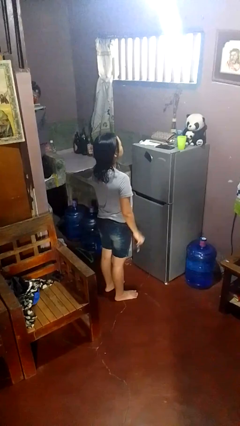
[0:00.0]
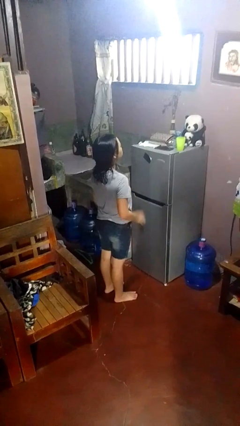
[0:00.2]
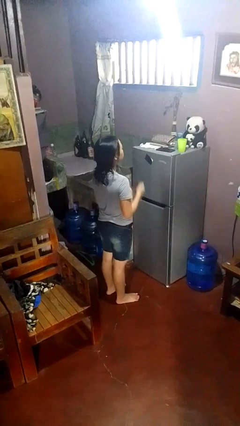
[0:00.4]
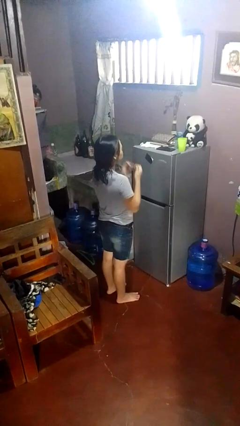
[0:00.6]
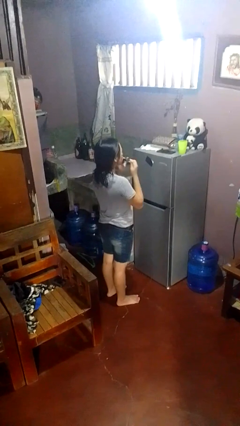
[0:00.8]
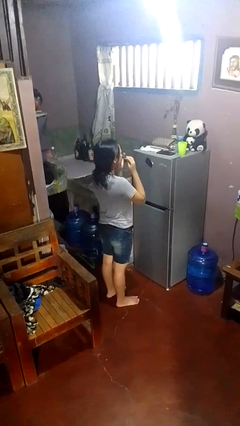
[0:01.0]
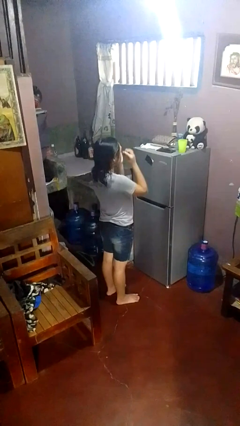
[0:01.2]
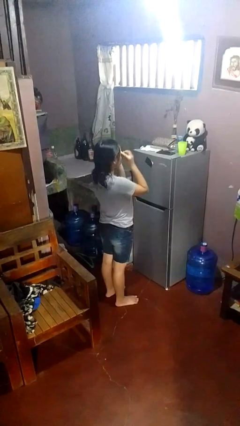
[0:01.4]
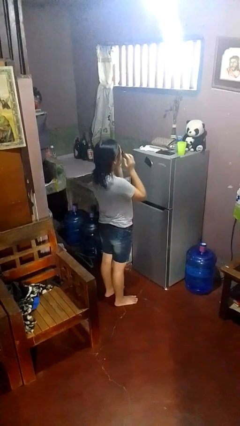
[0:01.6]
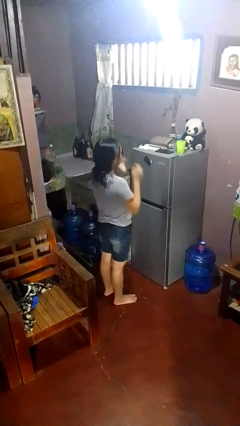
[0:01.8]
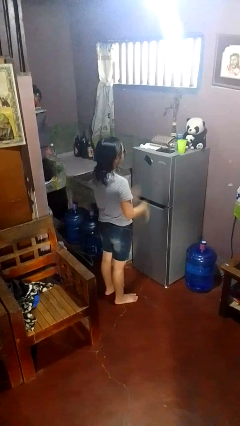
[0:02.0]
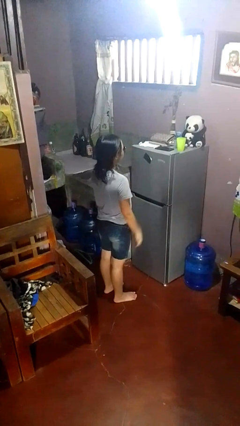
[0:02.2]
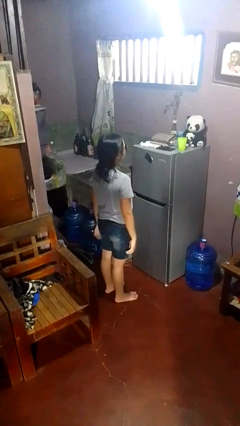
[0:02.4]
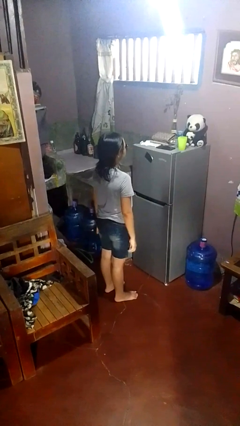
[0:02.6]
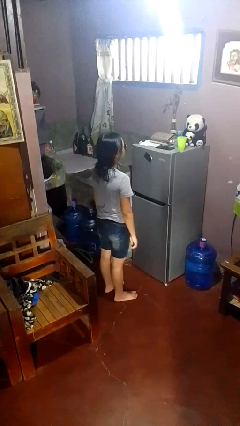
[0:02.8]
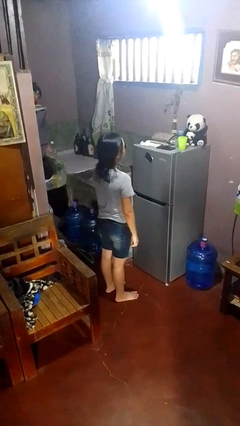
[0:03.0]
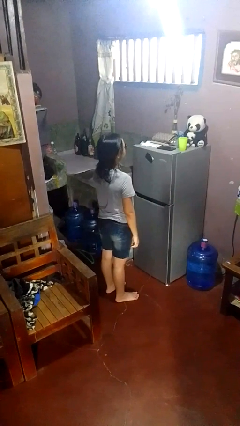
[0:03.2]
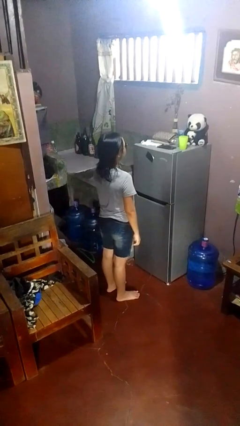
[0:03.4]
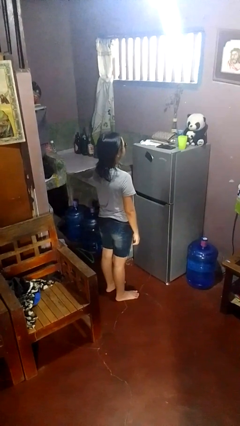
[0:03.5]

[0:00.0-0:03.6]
person puts on sunglasses

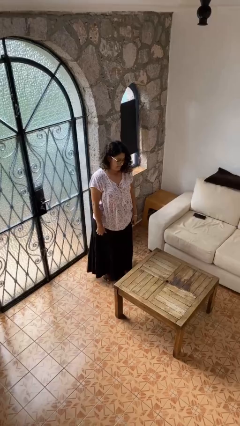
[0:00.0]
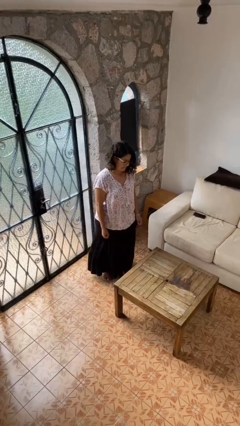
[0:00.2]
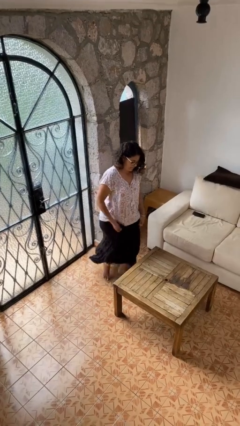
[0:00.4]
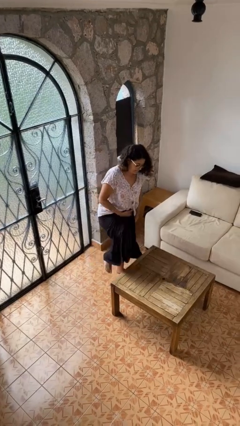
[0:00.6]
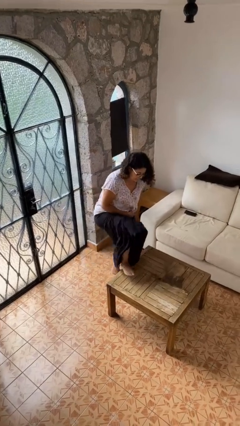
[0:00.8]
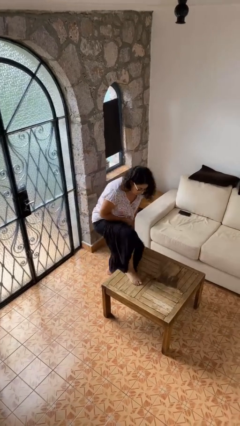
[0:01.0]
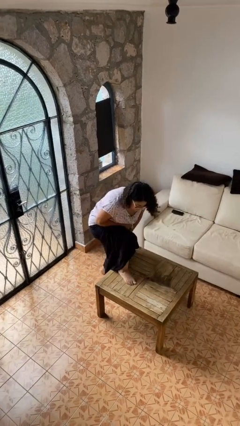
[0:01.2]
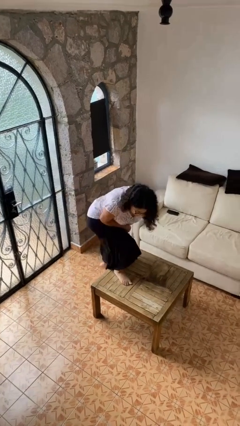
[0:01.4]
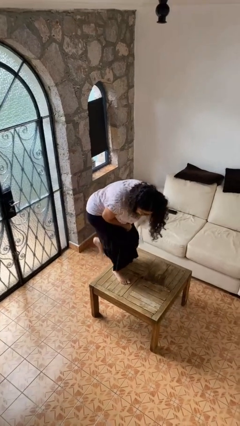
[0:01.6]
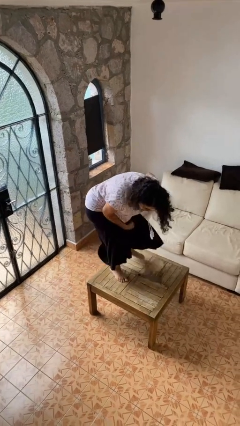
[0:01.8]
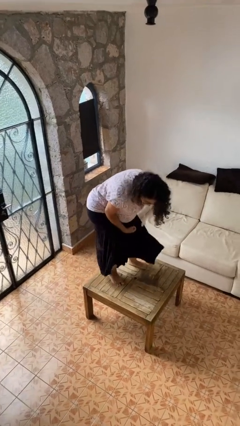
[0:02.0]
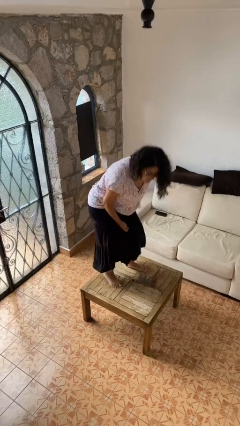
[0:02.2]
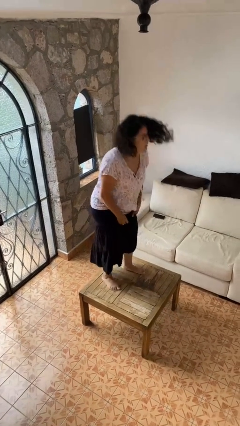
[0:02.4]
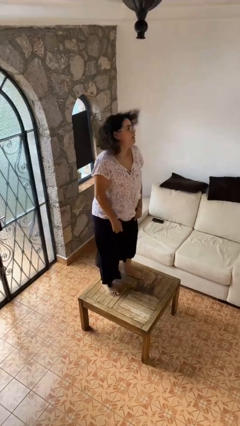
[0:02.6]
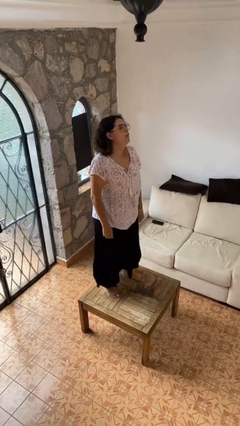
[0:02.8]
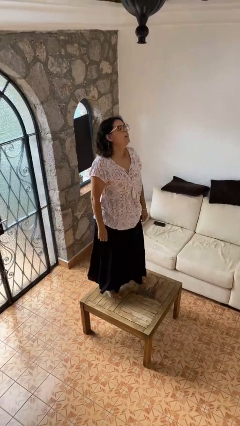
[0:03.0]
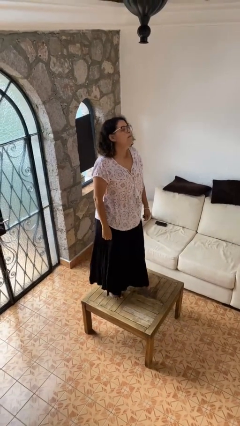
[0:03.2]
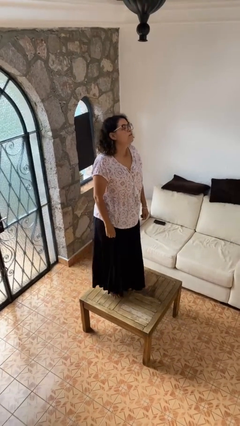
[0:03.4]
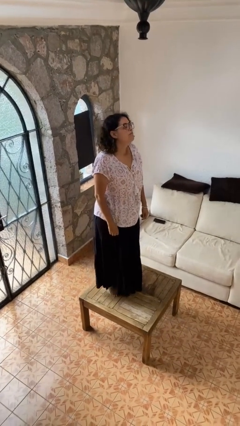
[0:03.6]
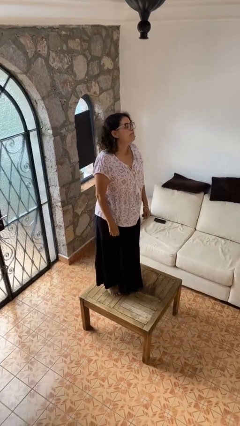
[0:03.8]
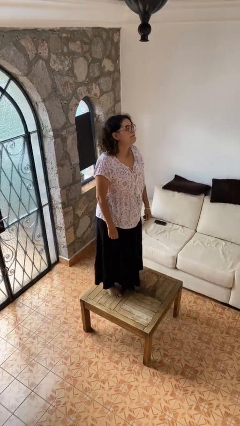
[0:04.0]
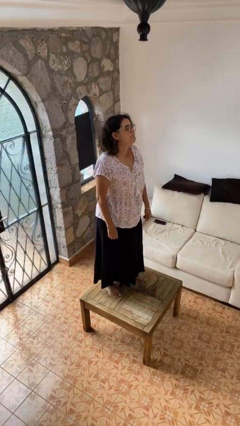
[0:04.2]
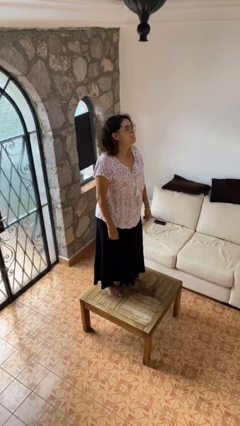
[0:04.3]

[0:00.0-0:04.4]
person climbs on table

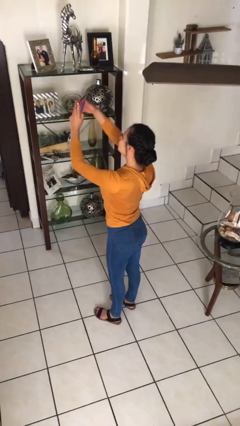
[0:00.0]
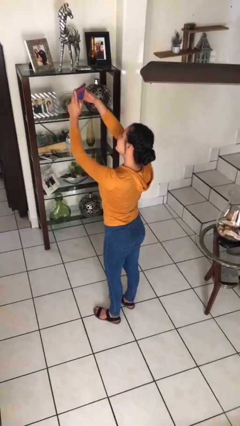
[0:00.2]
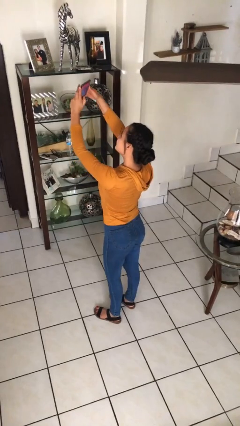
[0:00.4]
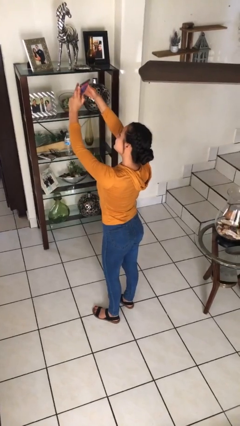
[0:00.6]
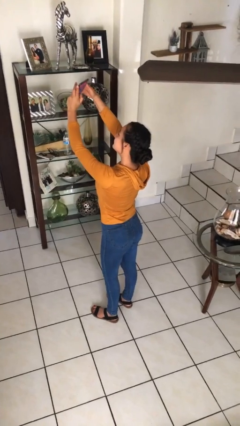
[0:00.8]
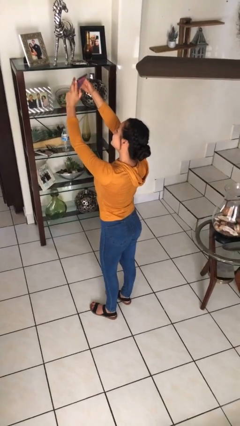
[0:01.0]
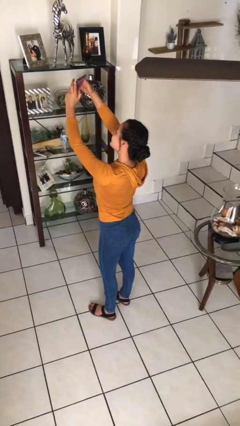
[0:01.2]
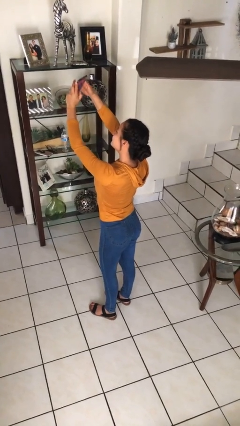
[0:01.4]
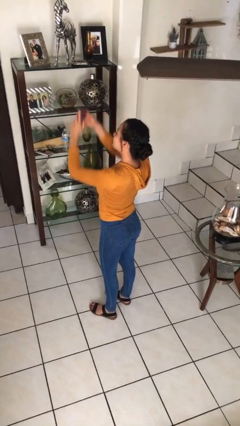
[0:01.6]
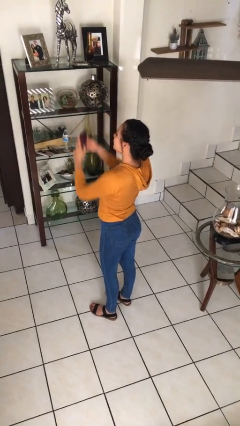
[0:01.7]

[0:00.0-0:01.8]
person takes selfie

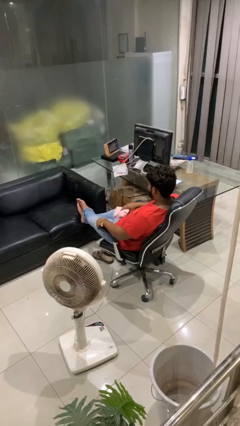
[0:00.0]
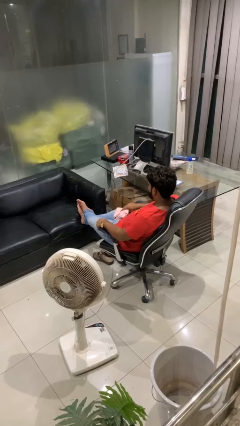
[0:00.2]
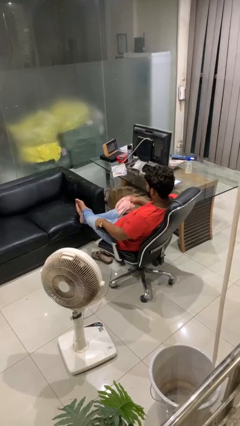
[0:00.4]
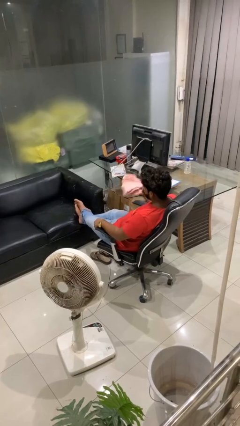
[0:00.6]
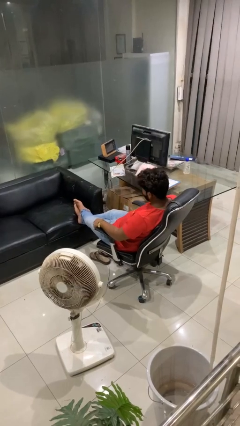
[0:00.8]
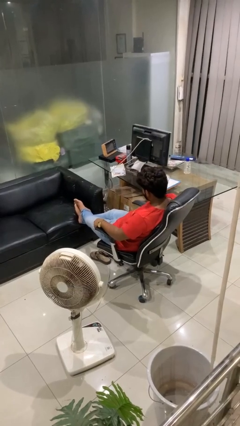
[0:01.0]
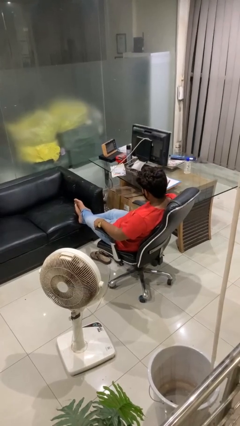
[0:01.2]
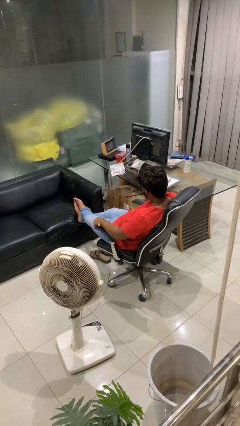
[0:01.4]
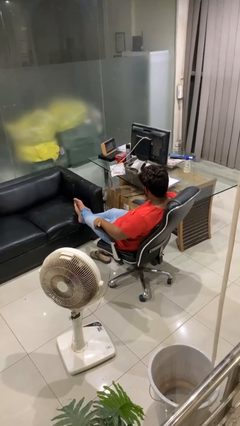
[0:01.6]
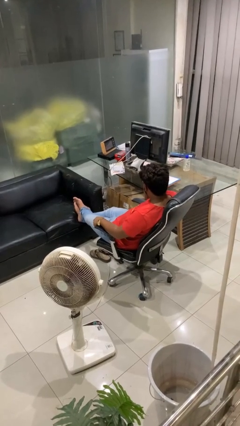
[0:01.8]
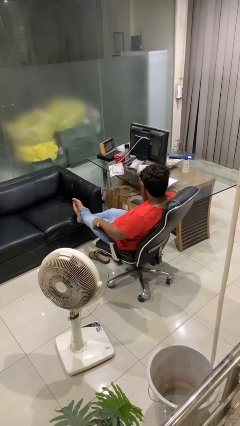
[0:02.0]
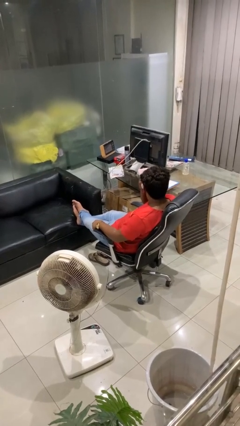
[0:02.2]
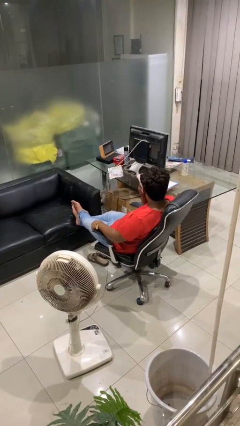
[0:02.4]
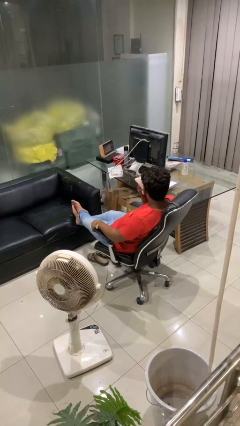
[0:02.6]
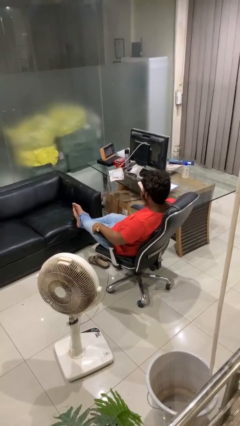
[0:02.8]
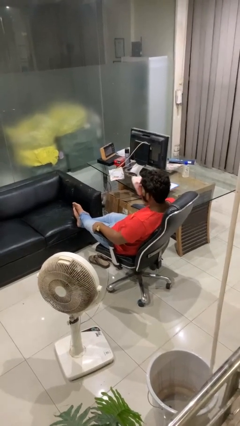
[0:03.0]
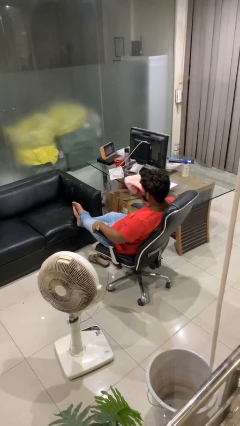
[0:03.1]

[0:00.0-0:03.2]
person wipes mouth with napkin

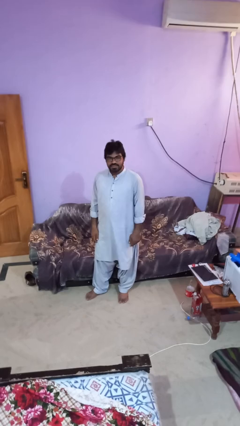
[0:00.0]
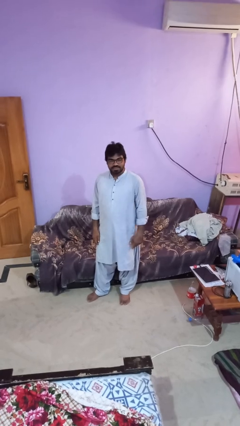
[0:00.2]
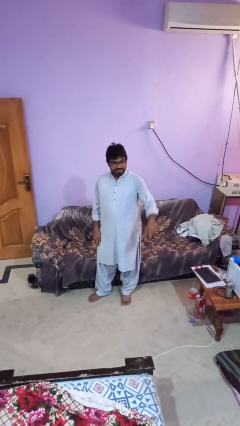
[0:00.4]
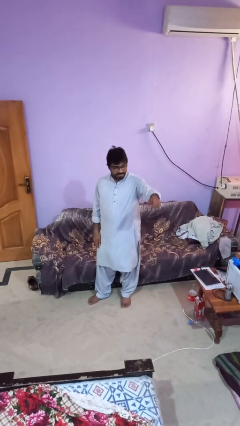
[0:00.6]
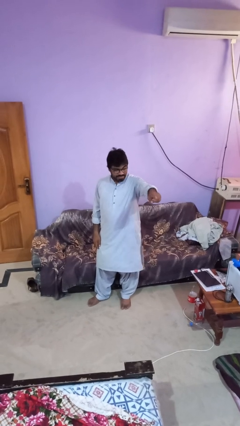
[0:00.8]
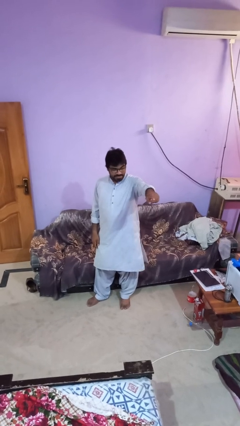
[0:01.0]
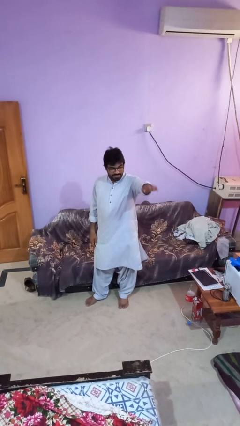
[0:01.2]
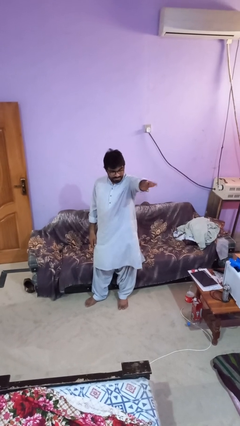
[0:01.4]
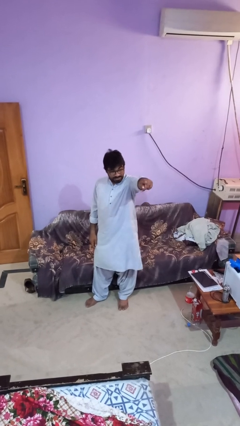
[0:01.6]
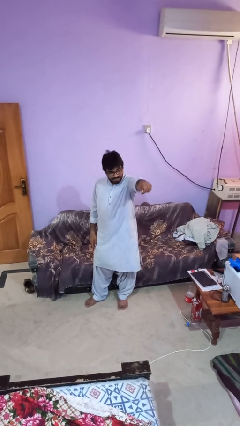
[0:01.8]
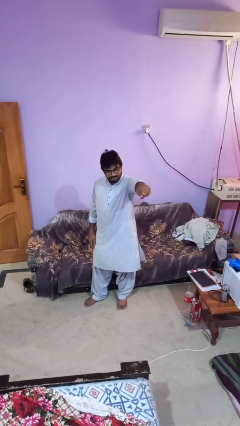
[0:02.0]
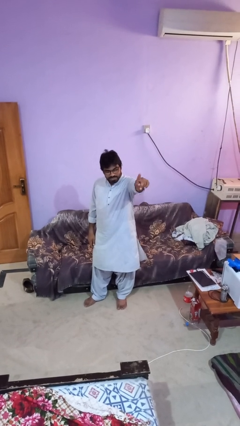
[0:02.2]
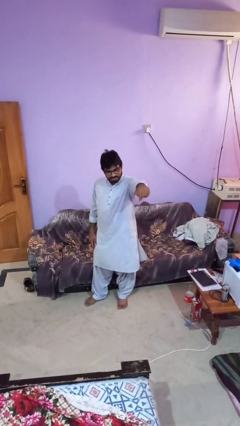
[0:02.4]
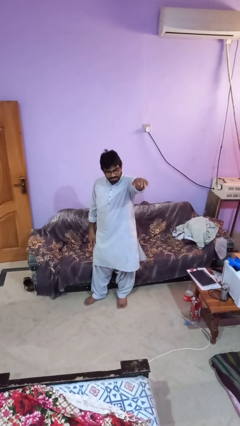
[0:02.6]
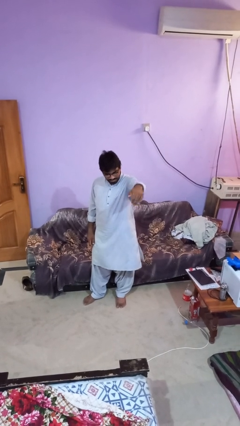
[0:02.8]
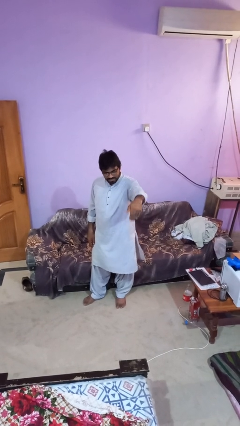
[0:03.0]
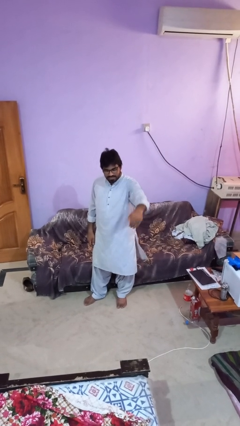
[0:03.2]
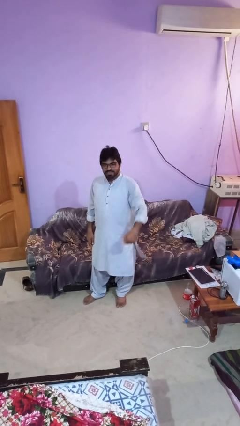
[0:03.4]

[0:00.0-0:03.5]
person gestures come here

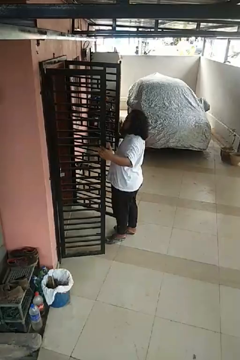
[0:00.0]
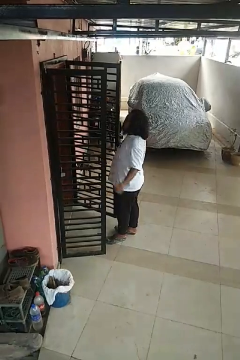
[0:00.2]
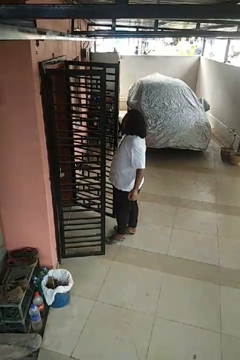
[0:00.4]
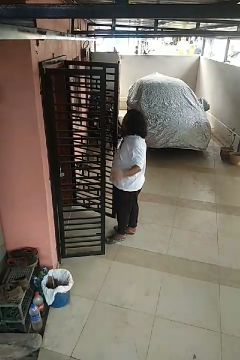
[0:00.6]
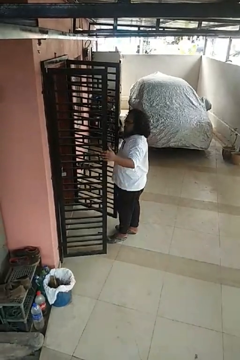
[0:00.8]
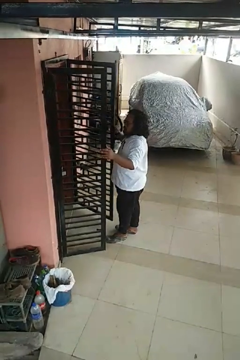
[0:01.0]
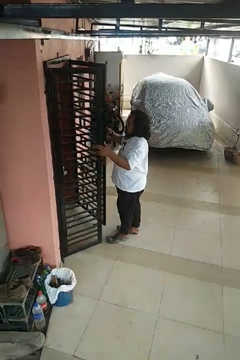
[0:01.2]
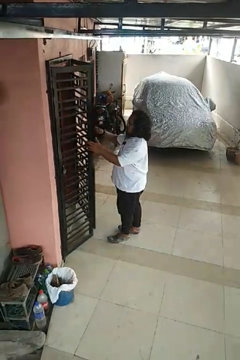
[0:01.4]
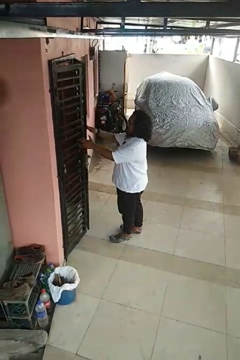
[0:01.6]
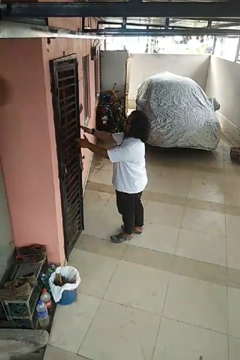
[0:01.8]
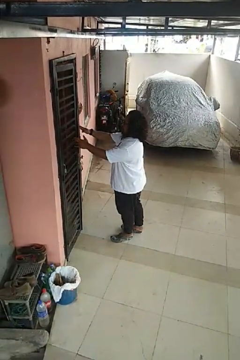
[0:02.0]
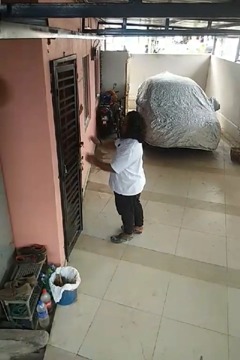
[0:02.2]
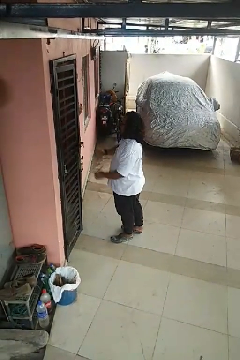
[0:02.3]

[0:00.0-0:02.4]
person closes gate
